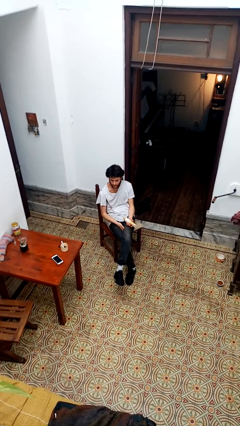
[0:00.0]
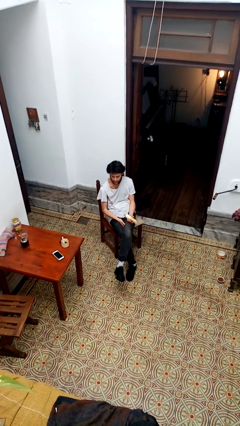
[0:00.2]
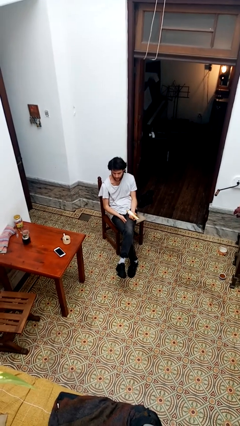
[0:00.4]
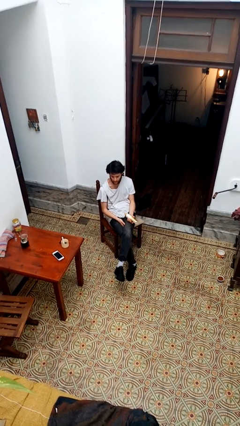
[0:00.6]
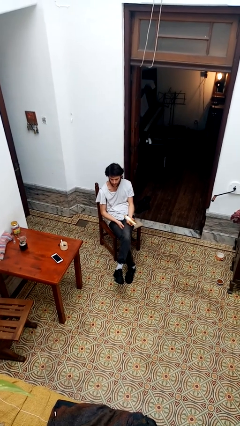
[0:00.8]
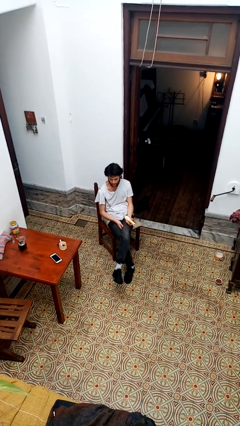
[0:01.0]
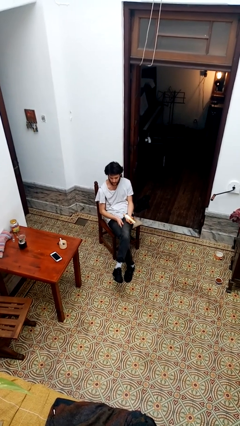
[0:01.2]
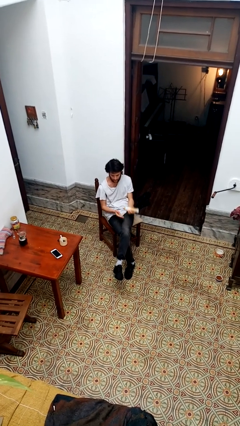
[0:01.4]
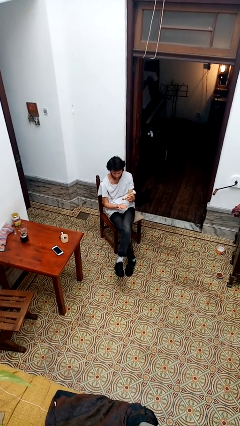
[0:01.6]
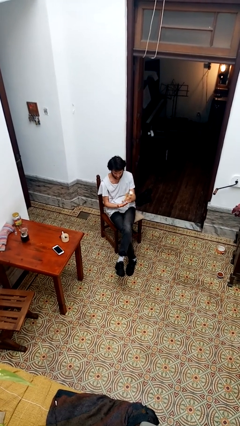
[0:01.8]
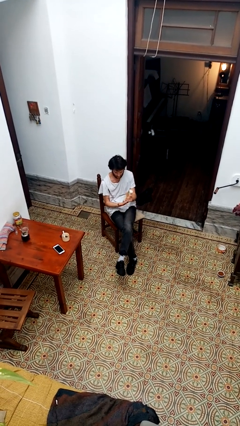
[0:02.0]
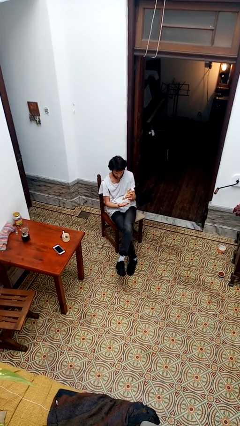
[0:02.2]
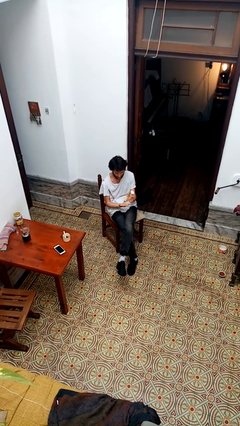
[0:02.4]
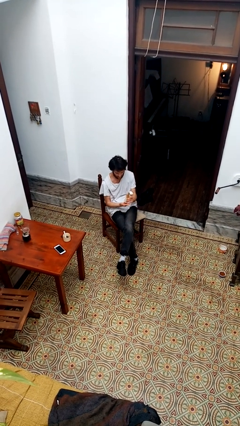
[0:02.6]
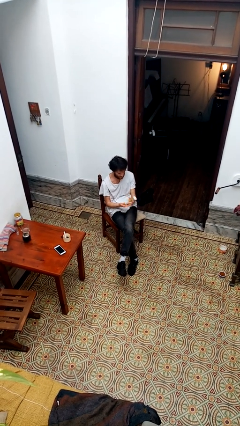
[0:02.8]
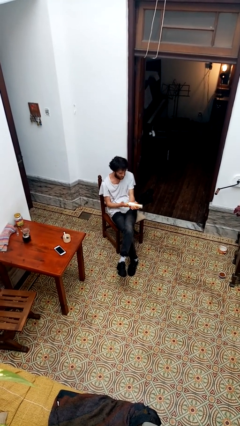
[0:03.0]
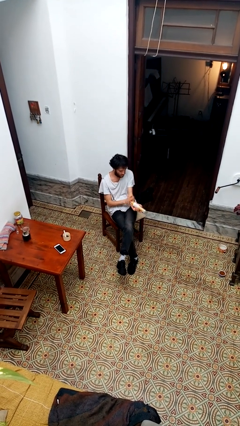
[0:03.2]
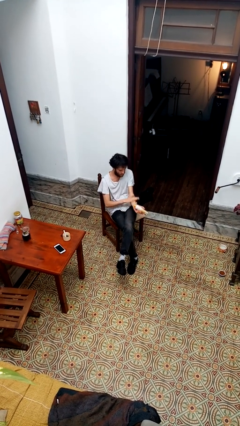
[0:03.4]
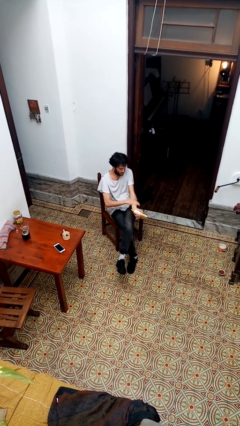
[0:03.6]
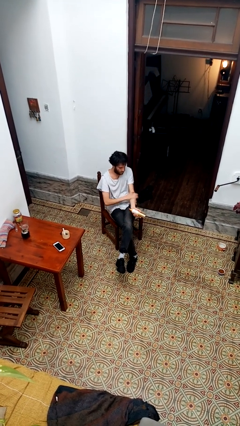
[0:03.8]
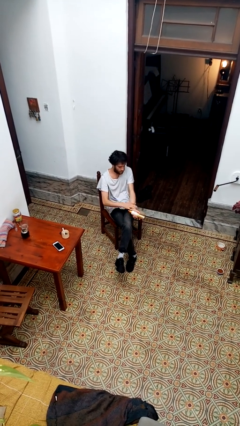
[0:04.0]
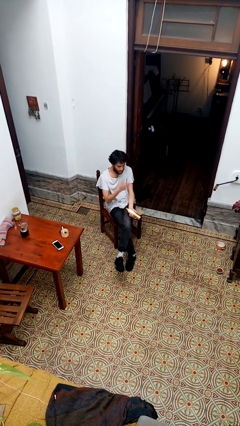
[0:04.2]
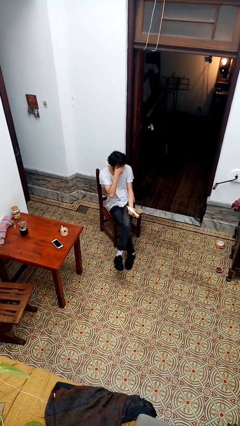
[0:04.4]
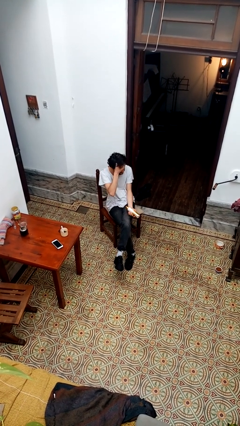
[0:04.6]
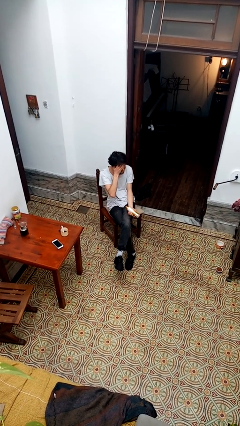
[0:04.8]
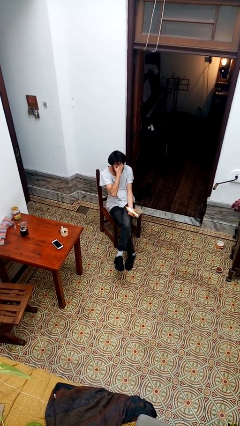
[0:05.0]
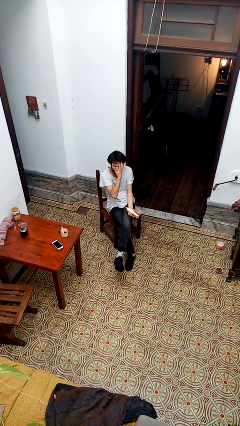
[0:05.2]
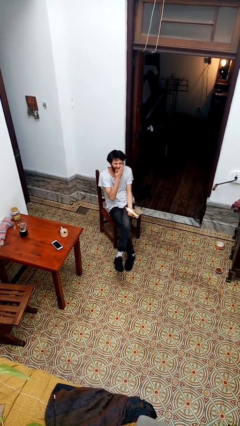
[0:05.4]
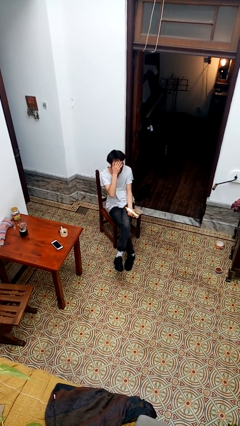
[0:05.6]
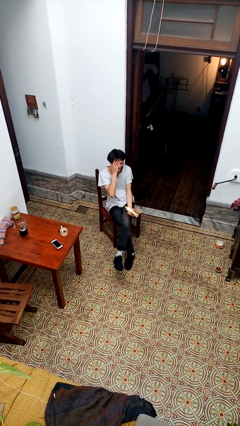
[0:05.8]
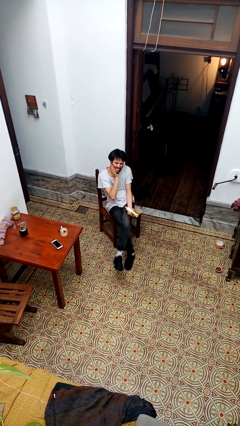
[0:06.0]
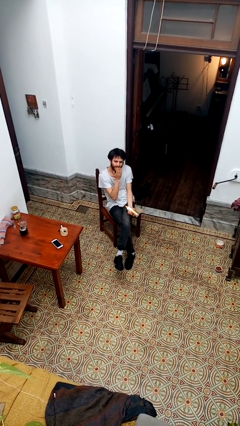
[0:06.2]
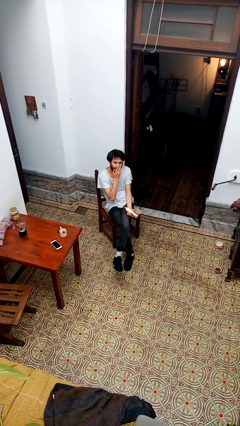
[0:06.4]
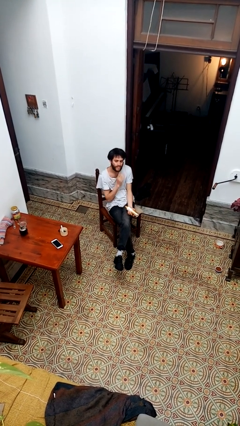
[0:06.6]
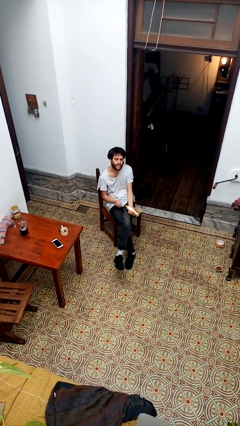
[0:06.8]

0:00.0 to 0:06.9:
person applies sunscreen

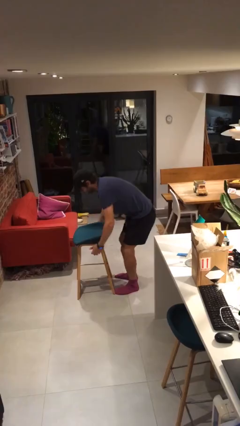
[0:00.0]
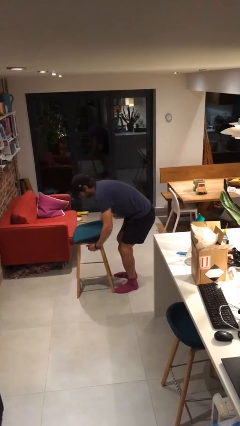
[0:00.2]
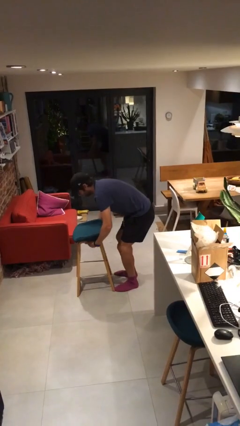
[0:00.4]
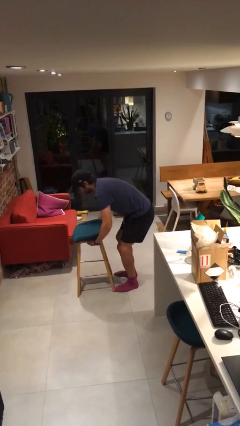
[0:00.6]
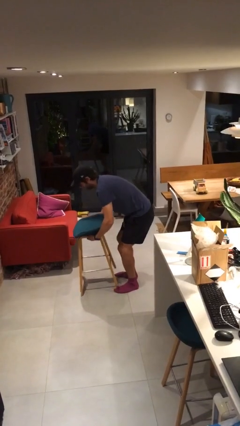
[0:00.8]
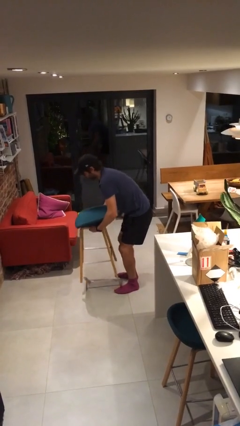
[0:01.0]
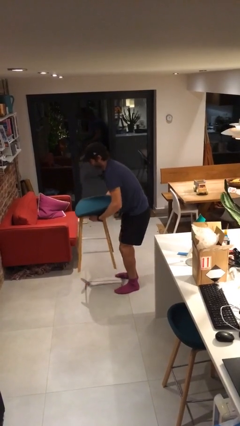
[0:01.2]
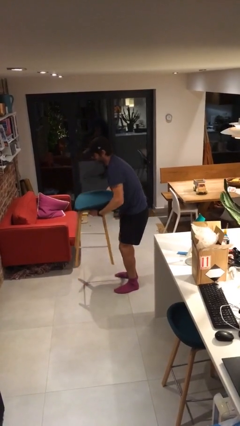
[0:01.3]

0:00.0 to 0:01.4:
person picks up object from floor

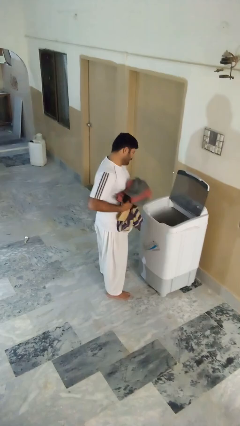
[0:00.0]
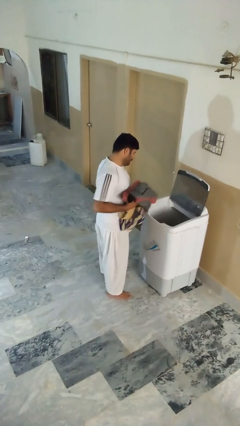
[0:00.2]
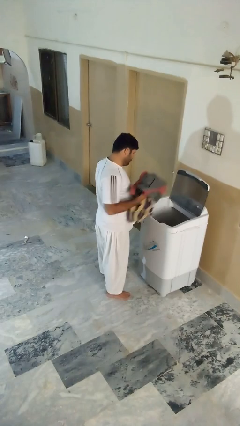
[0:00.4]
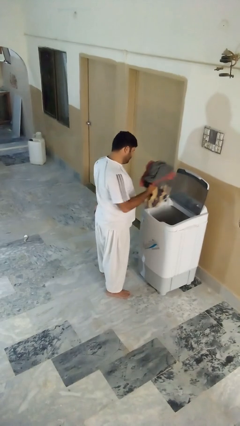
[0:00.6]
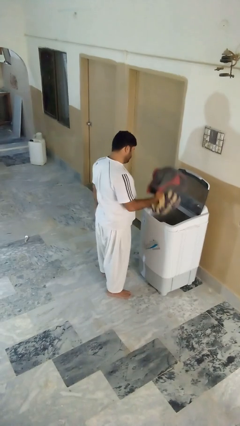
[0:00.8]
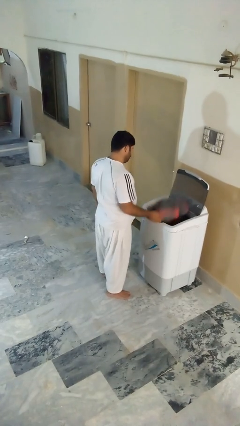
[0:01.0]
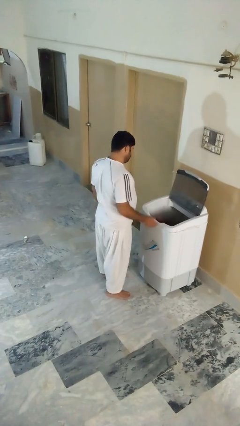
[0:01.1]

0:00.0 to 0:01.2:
person loads clotheswasher

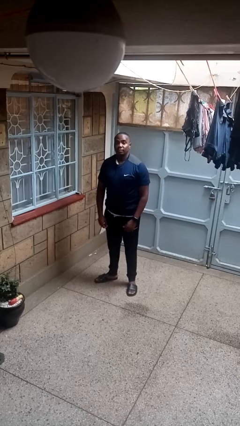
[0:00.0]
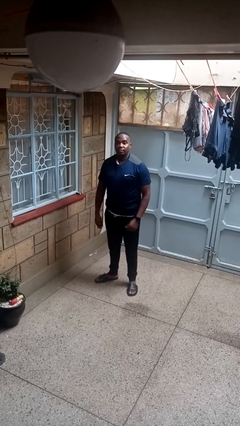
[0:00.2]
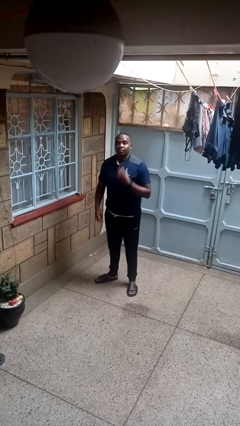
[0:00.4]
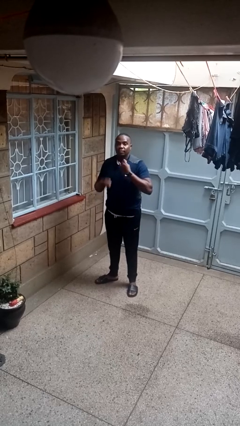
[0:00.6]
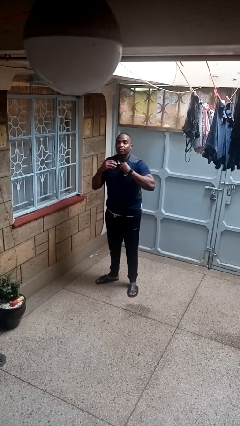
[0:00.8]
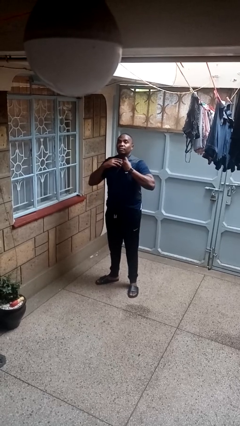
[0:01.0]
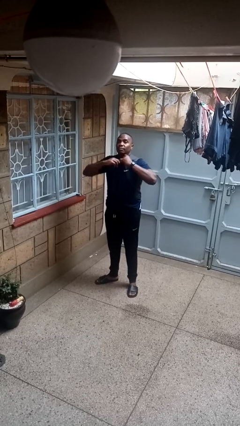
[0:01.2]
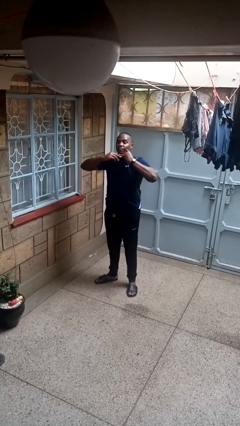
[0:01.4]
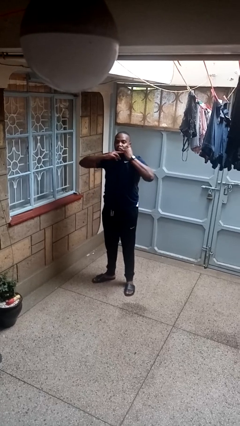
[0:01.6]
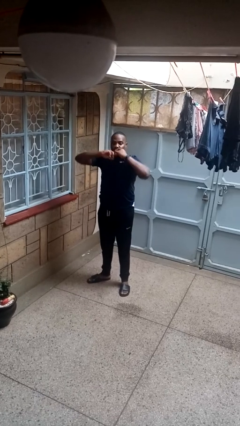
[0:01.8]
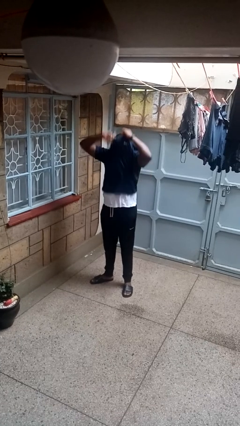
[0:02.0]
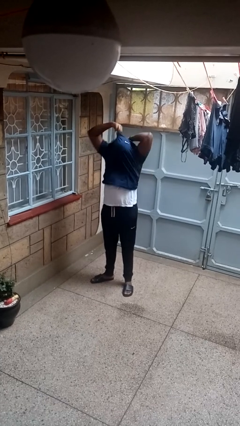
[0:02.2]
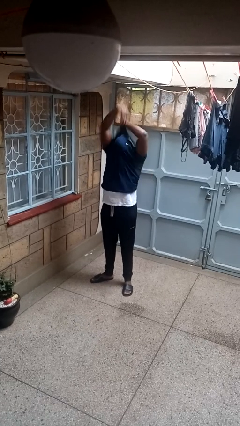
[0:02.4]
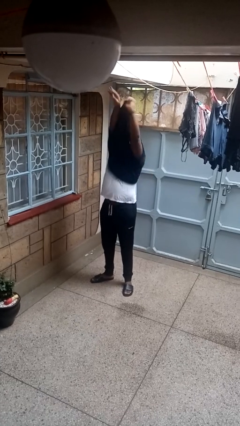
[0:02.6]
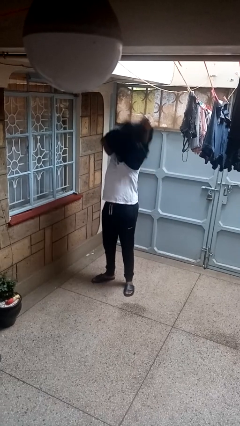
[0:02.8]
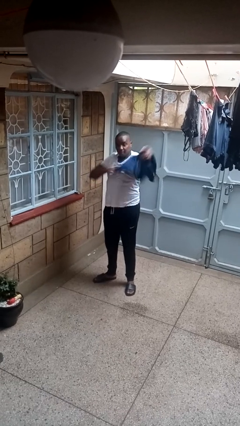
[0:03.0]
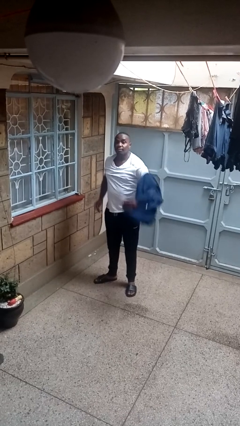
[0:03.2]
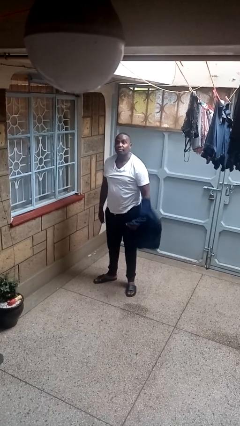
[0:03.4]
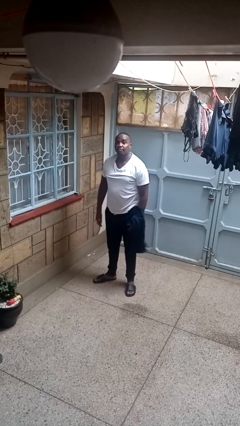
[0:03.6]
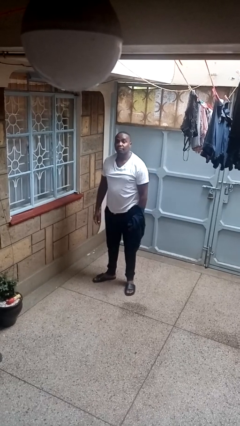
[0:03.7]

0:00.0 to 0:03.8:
person takes off shirt

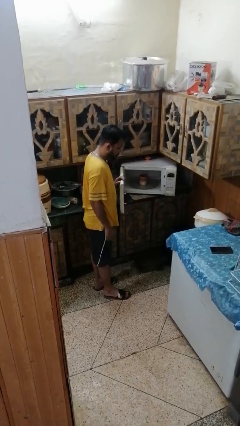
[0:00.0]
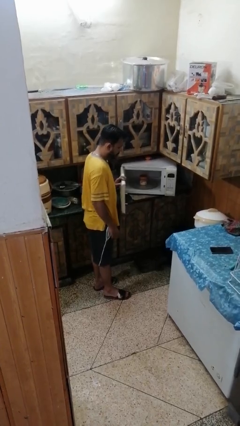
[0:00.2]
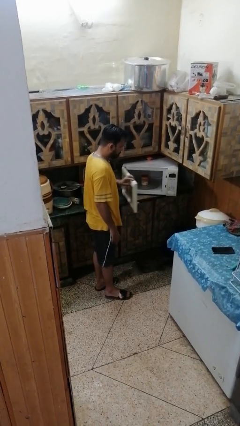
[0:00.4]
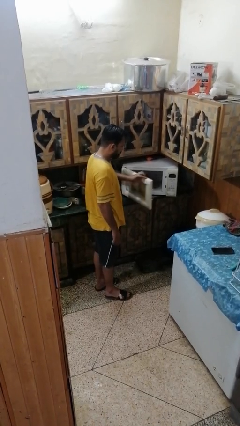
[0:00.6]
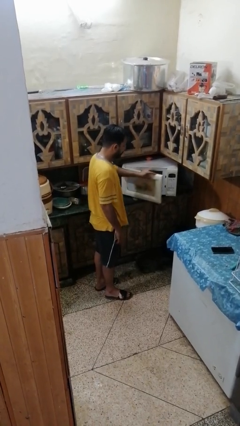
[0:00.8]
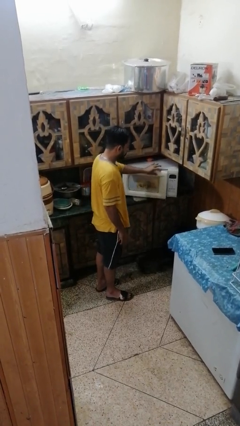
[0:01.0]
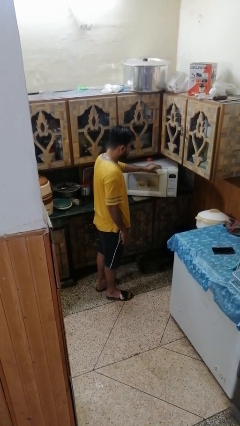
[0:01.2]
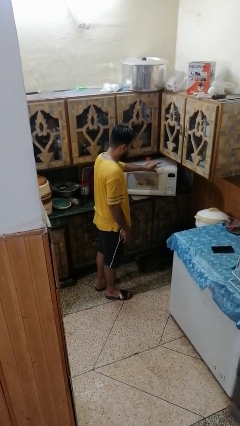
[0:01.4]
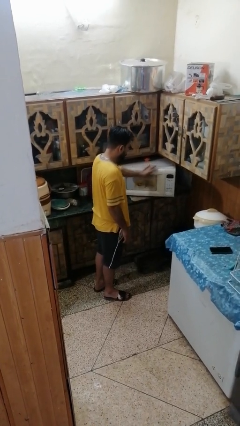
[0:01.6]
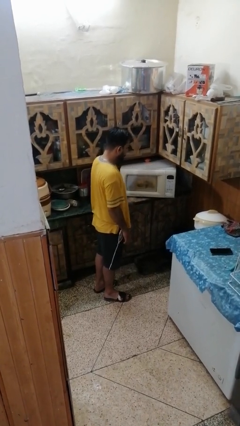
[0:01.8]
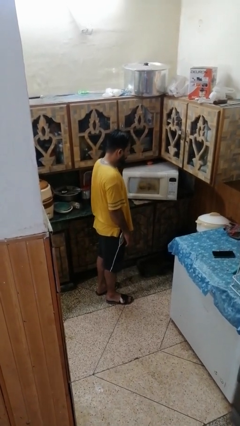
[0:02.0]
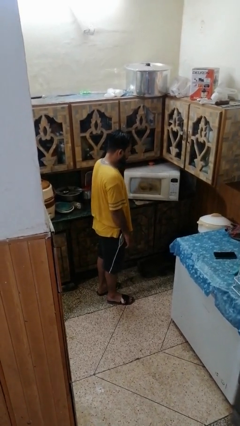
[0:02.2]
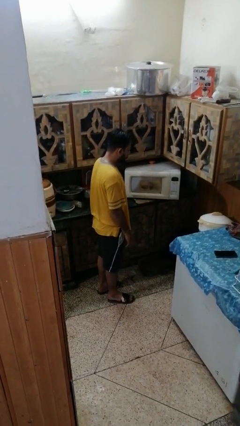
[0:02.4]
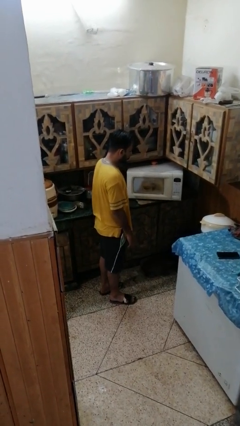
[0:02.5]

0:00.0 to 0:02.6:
person closes refrigerator

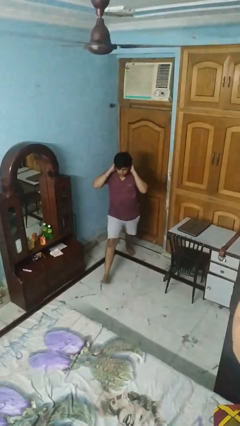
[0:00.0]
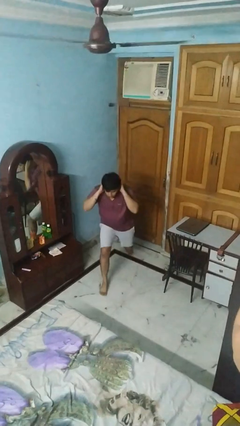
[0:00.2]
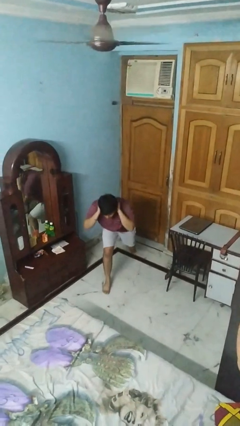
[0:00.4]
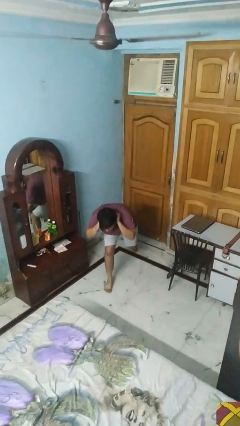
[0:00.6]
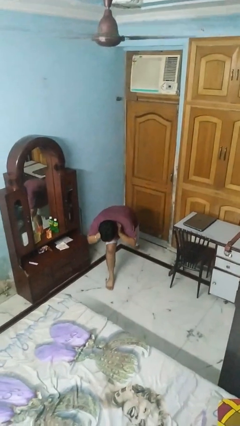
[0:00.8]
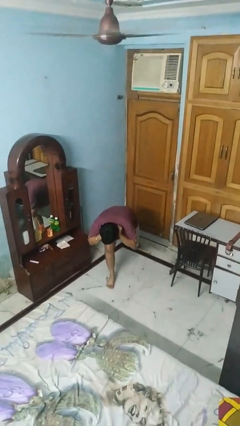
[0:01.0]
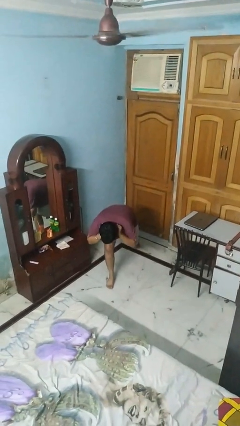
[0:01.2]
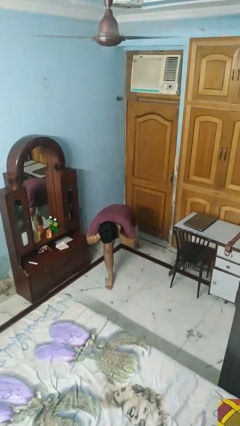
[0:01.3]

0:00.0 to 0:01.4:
person exercises with lunges
